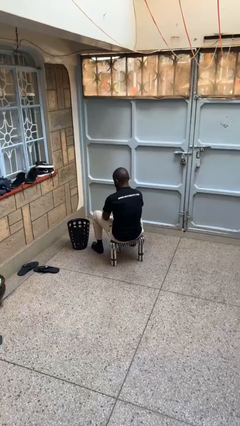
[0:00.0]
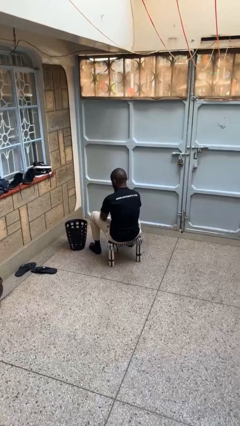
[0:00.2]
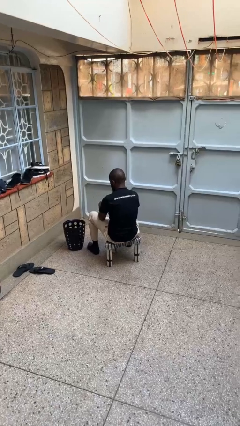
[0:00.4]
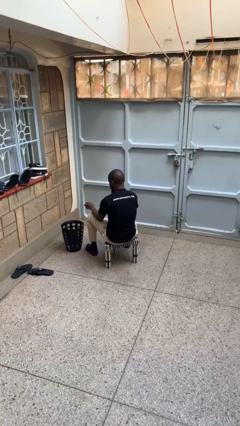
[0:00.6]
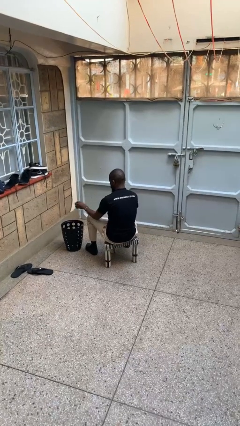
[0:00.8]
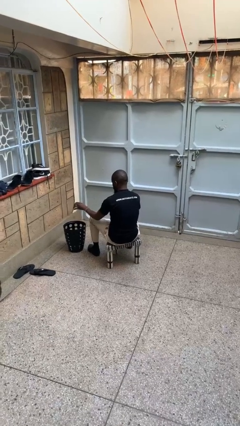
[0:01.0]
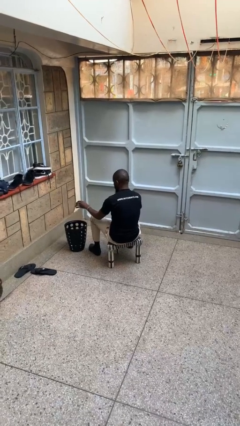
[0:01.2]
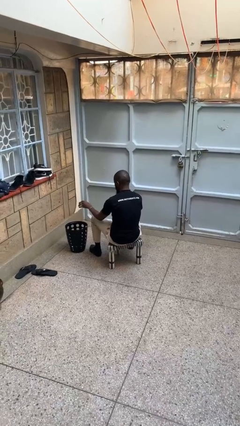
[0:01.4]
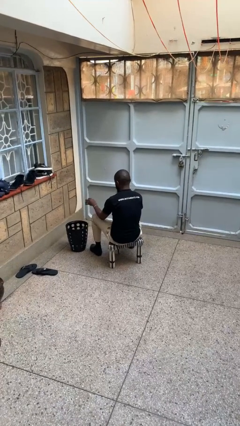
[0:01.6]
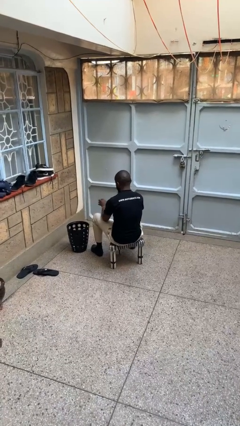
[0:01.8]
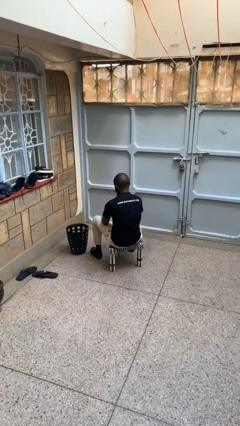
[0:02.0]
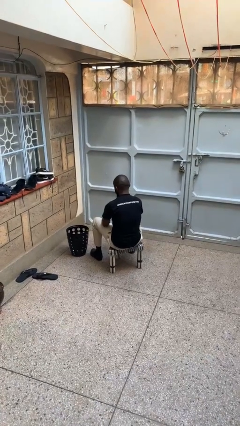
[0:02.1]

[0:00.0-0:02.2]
person discards trash

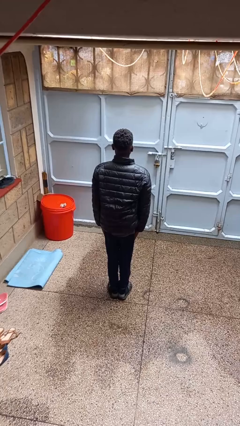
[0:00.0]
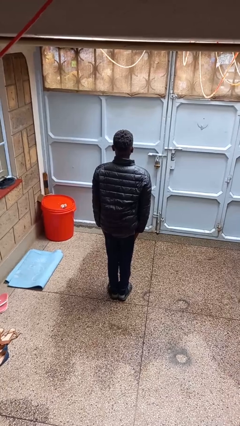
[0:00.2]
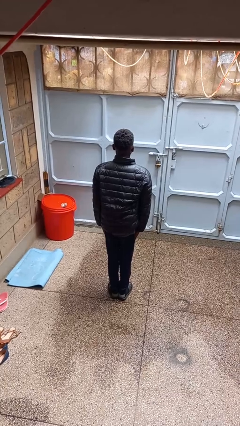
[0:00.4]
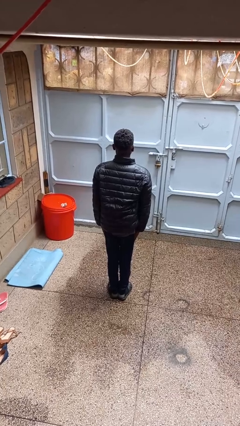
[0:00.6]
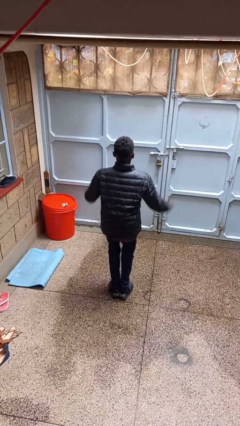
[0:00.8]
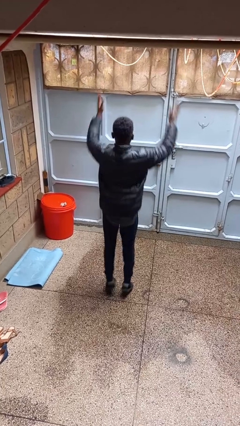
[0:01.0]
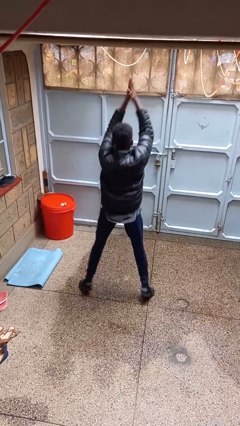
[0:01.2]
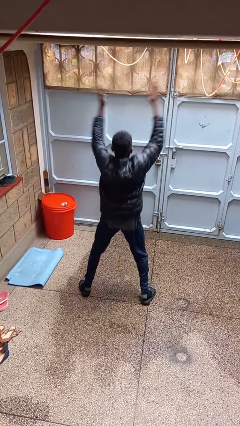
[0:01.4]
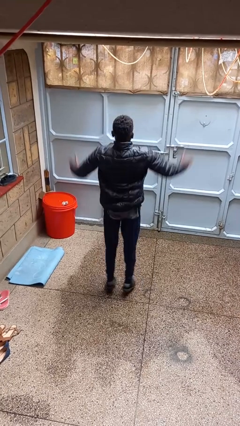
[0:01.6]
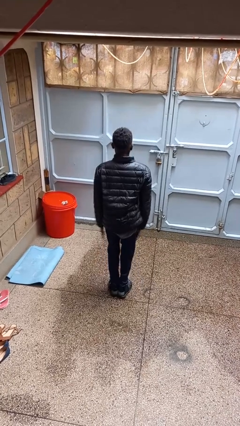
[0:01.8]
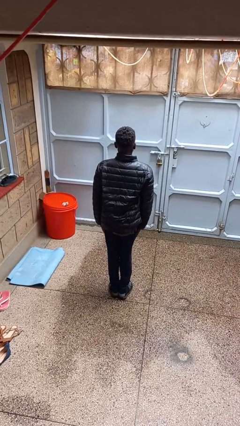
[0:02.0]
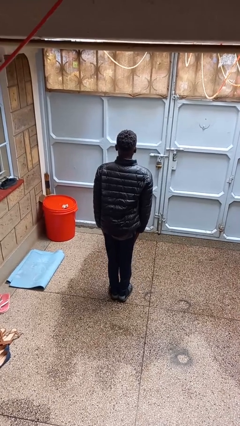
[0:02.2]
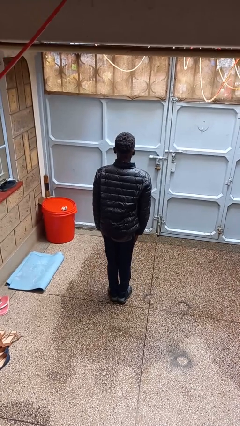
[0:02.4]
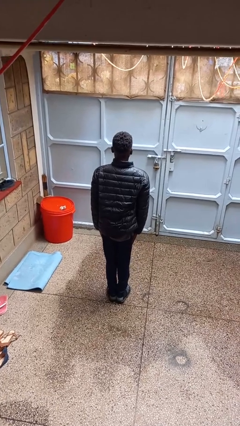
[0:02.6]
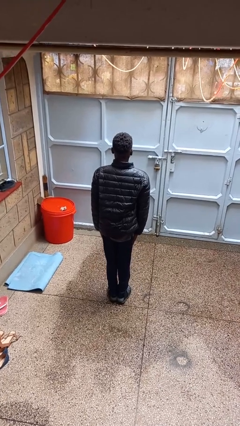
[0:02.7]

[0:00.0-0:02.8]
person exercises with jumping jacks

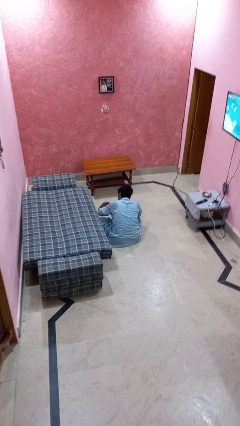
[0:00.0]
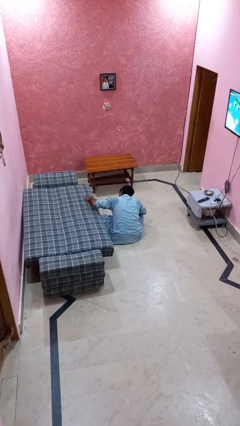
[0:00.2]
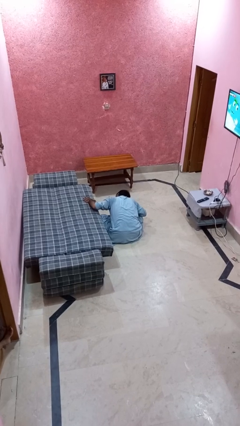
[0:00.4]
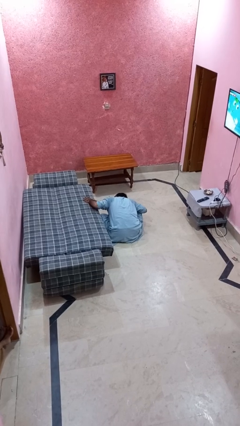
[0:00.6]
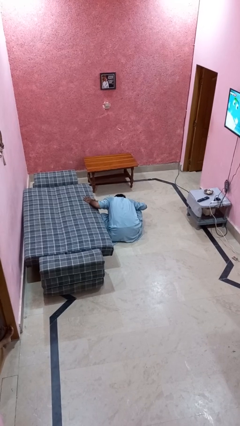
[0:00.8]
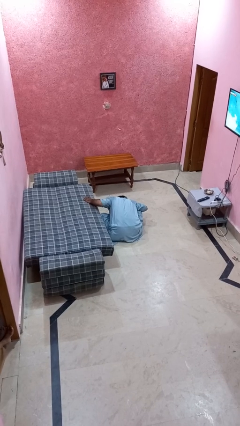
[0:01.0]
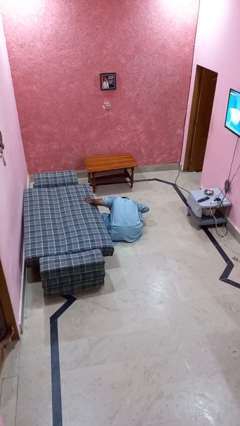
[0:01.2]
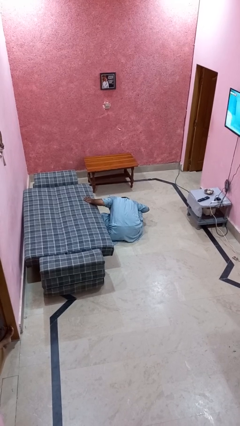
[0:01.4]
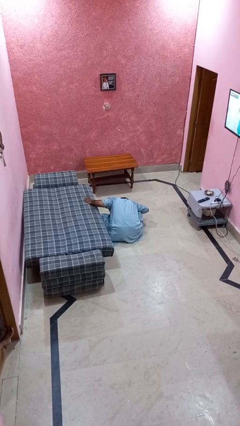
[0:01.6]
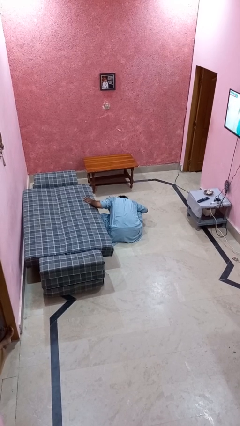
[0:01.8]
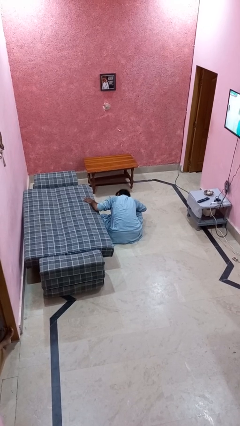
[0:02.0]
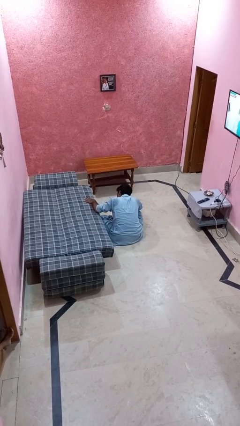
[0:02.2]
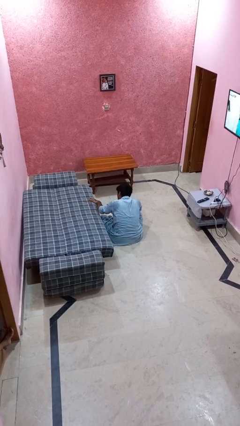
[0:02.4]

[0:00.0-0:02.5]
person searches under bed

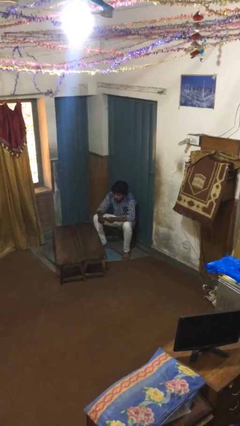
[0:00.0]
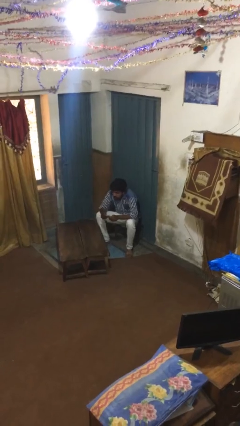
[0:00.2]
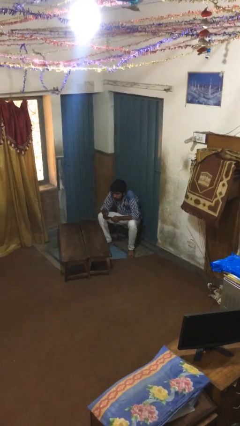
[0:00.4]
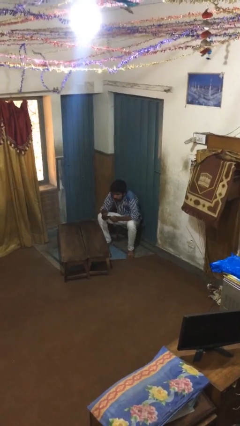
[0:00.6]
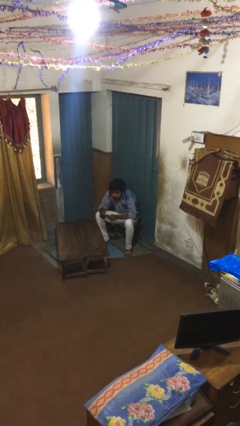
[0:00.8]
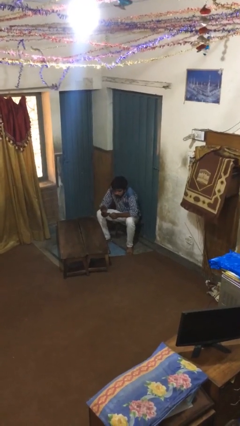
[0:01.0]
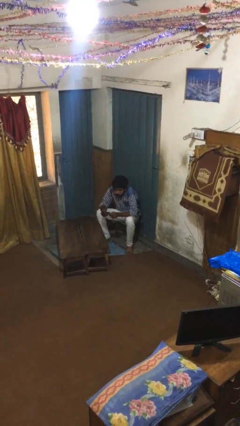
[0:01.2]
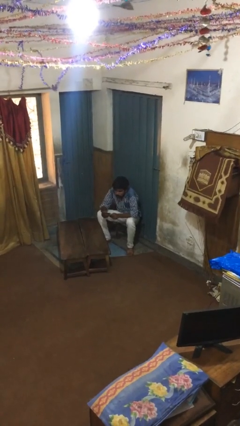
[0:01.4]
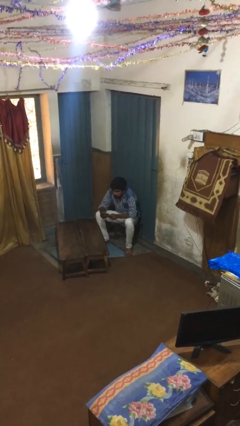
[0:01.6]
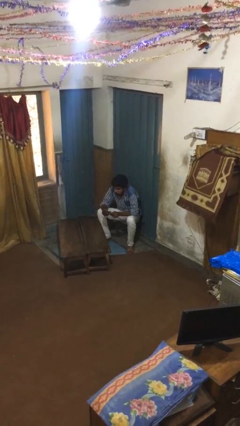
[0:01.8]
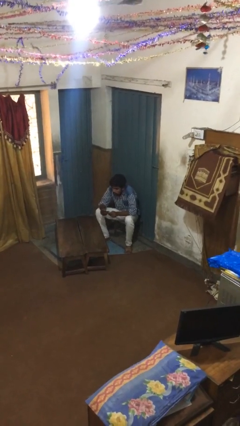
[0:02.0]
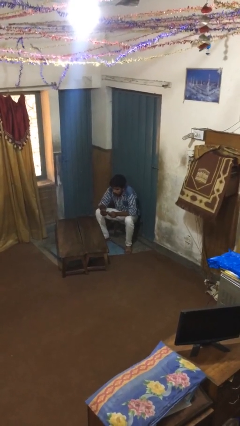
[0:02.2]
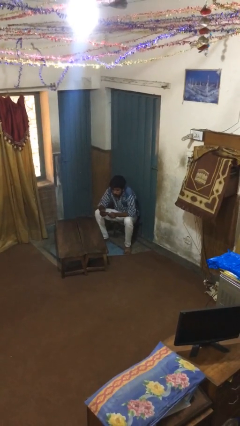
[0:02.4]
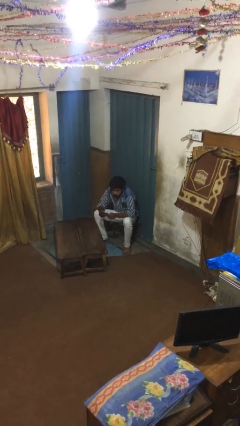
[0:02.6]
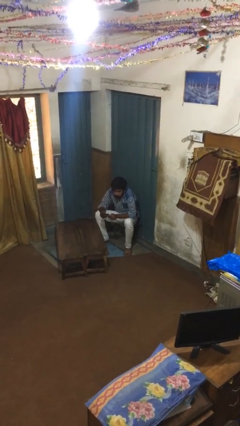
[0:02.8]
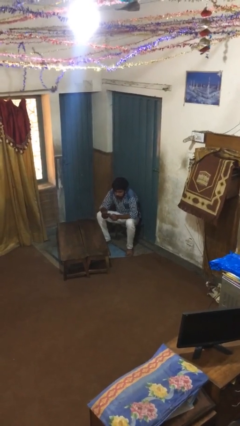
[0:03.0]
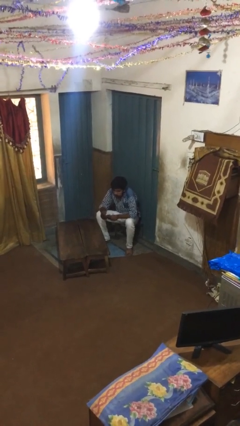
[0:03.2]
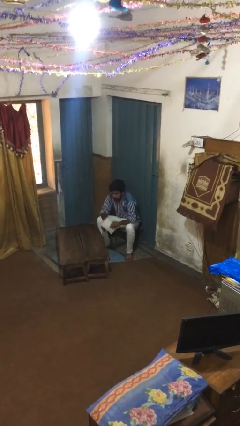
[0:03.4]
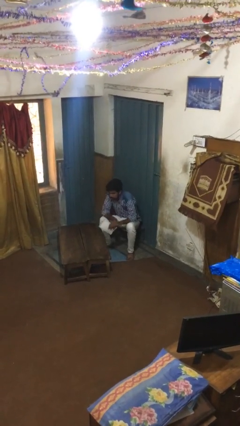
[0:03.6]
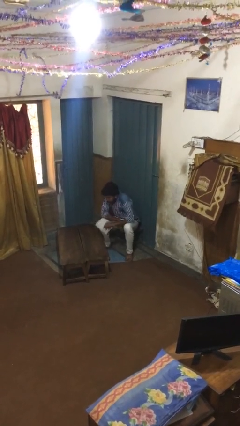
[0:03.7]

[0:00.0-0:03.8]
person reads document

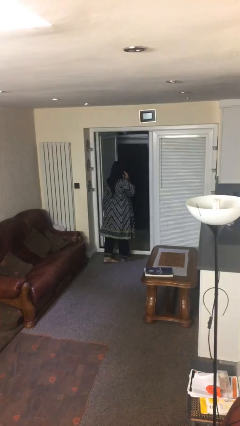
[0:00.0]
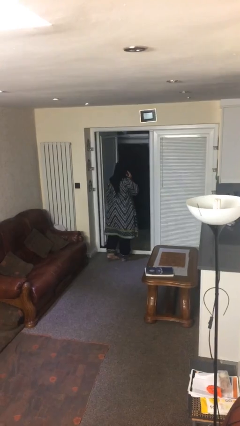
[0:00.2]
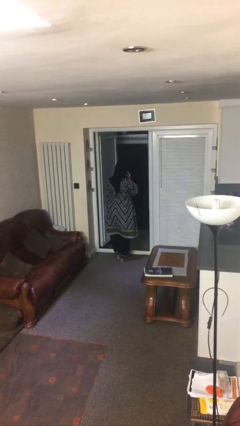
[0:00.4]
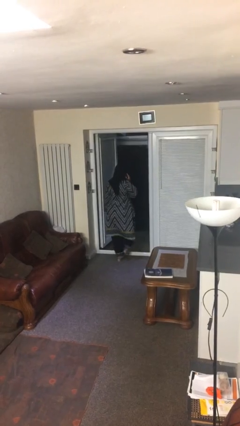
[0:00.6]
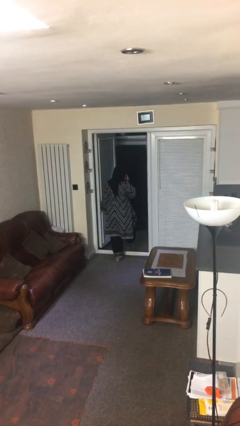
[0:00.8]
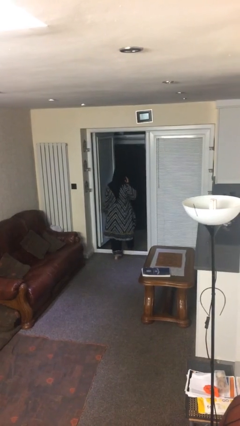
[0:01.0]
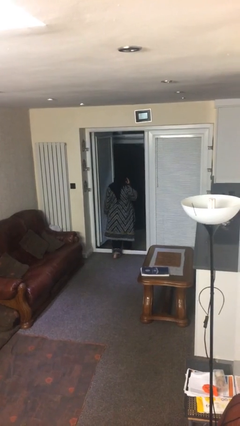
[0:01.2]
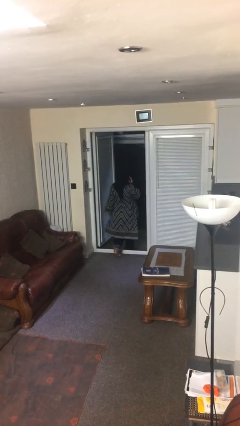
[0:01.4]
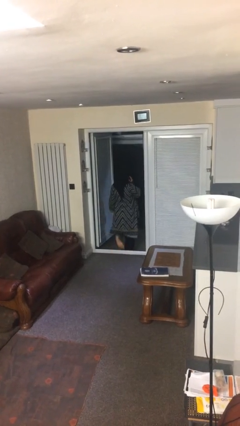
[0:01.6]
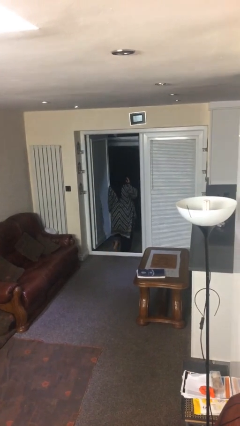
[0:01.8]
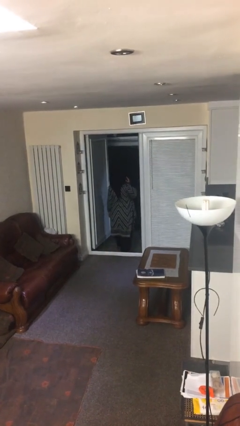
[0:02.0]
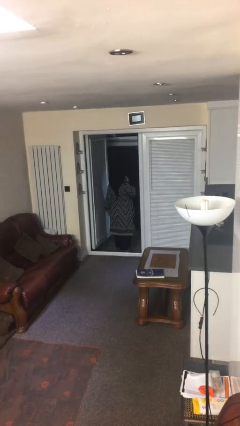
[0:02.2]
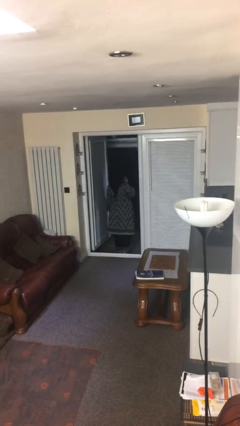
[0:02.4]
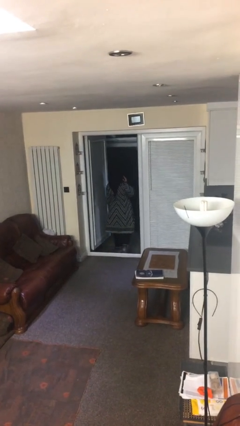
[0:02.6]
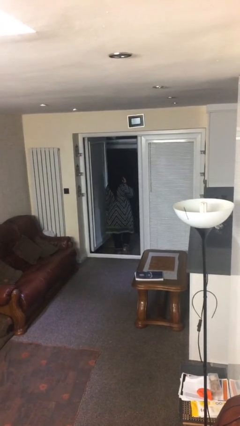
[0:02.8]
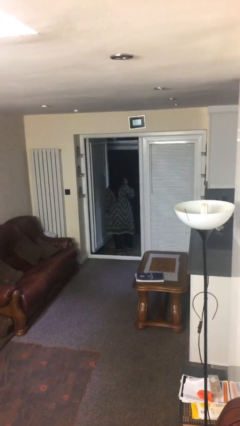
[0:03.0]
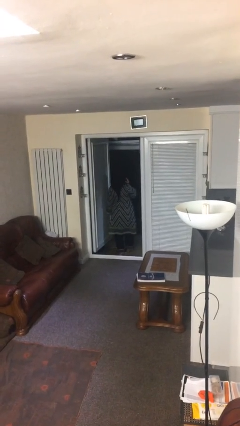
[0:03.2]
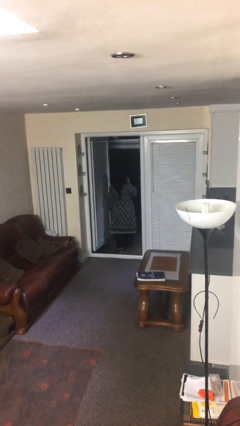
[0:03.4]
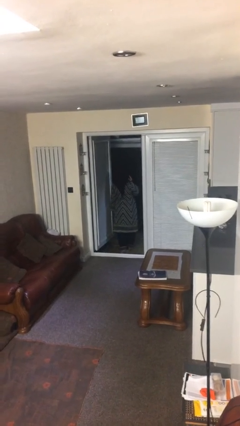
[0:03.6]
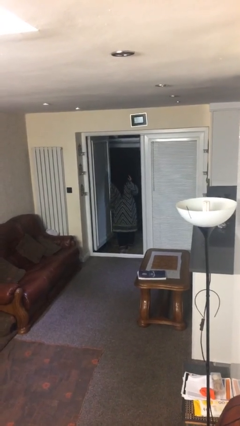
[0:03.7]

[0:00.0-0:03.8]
person exits scene through structure

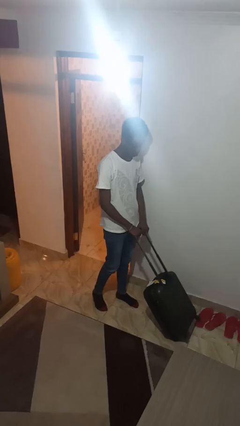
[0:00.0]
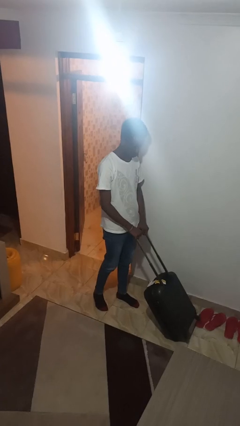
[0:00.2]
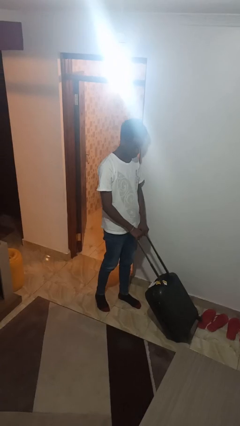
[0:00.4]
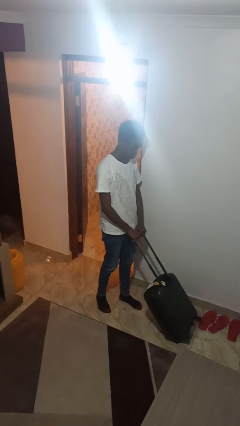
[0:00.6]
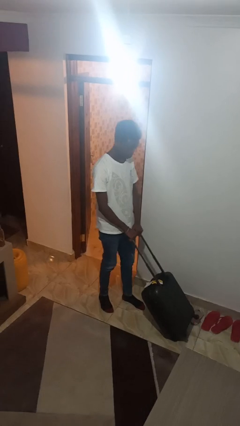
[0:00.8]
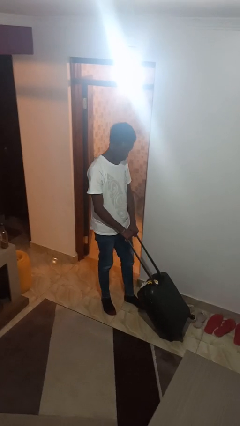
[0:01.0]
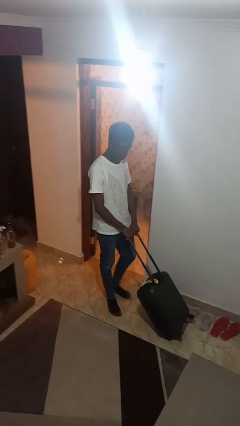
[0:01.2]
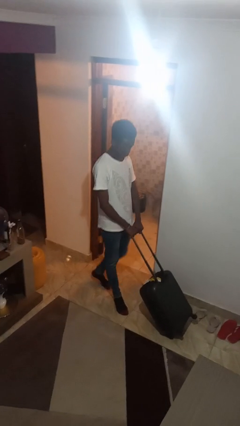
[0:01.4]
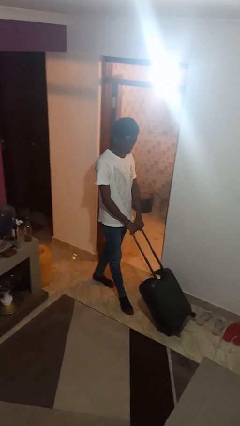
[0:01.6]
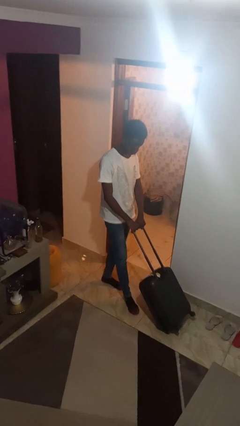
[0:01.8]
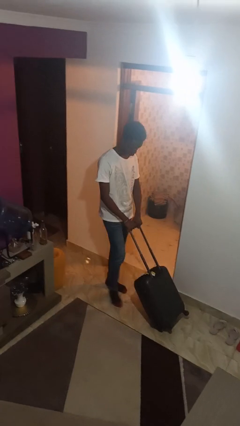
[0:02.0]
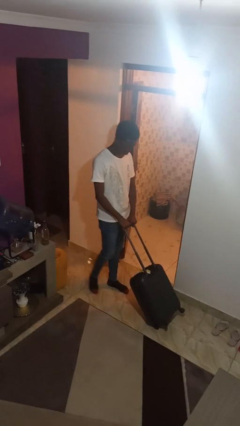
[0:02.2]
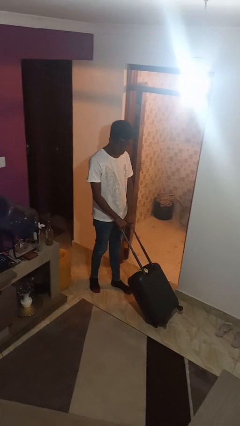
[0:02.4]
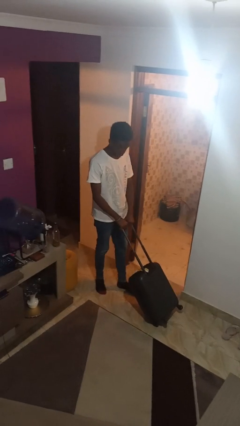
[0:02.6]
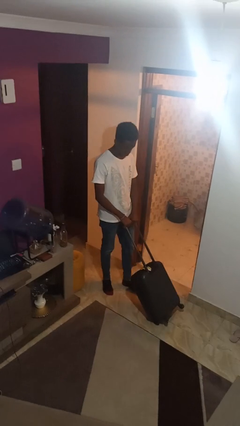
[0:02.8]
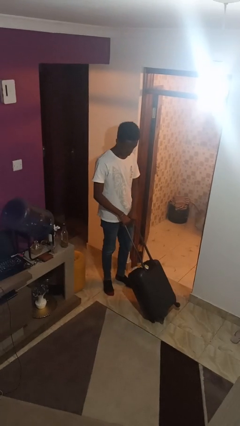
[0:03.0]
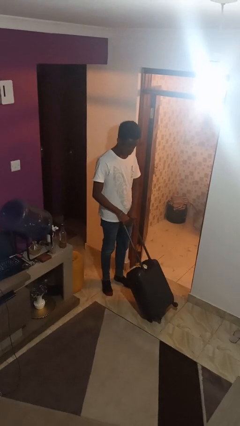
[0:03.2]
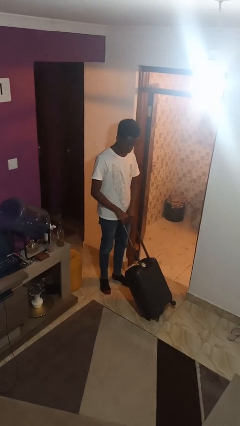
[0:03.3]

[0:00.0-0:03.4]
person pulls wheeled cart
